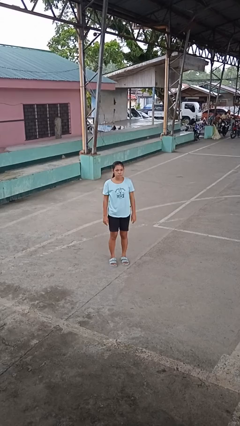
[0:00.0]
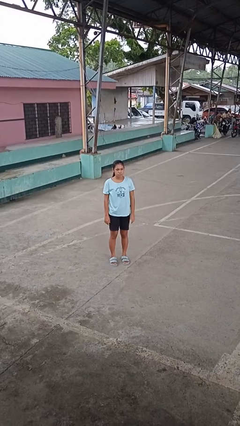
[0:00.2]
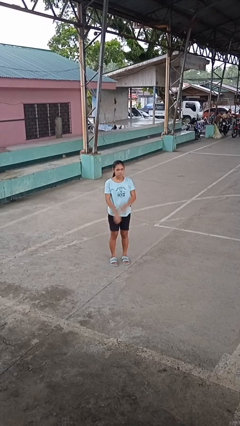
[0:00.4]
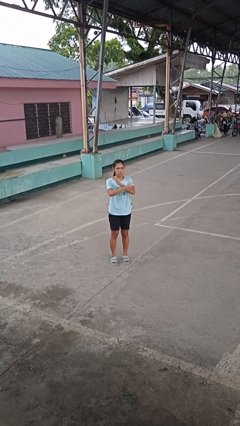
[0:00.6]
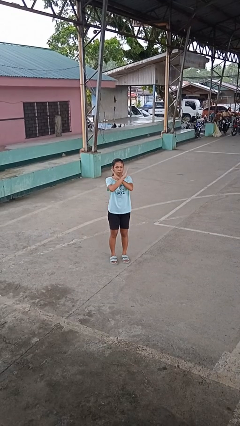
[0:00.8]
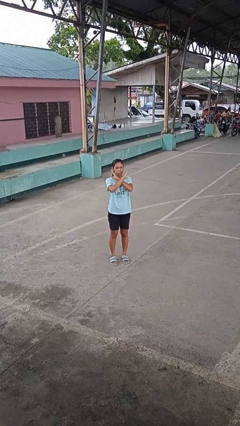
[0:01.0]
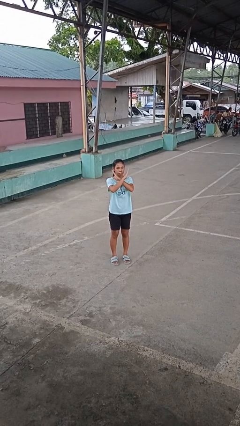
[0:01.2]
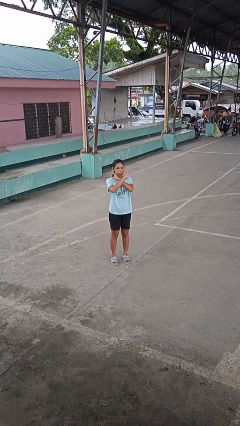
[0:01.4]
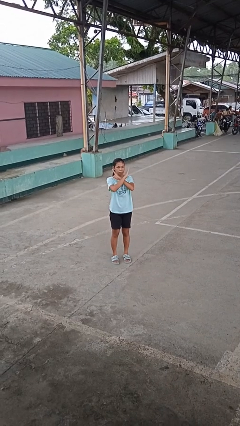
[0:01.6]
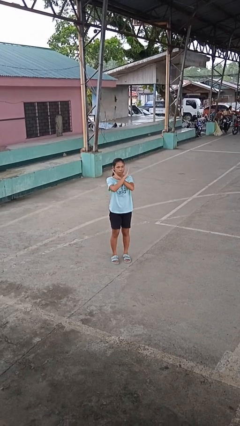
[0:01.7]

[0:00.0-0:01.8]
person gestures arms x

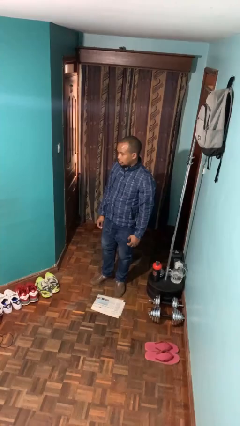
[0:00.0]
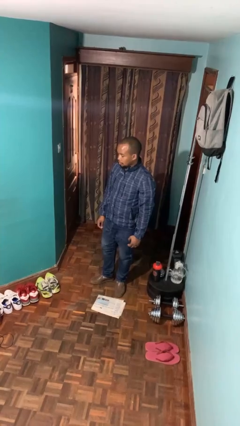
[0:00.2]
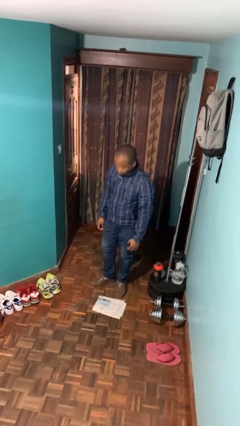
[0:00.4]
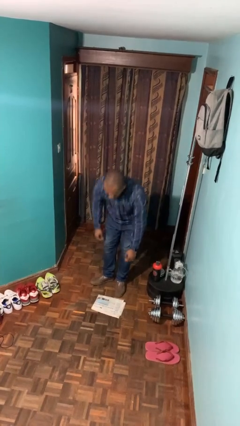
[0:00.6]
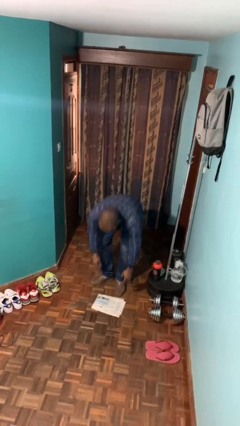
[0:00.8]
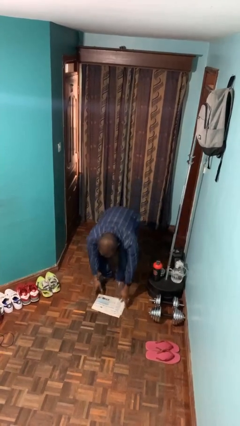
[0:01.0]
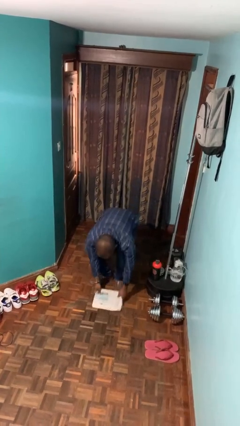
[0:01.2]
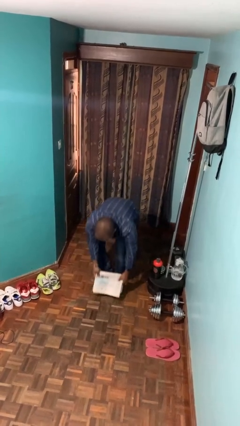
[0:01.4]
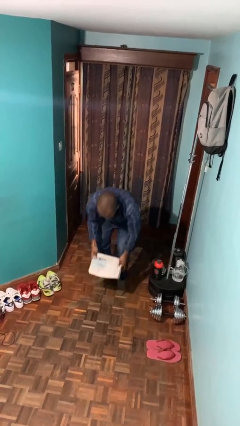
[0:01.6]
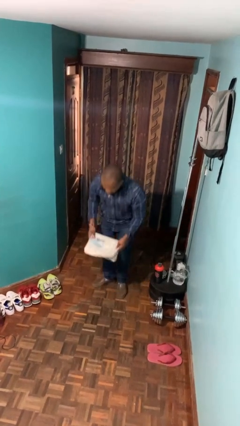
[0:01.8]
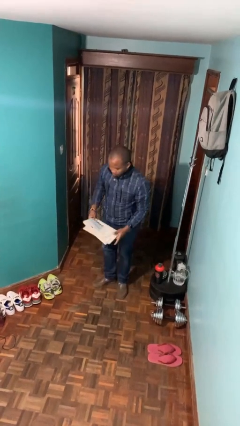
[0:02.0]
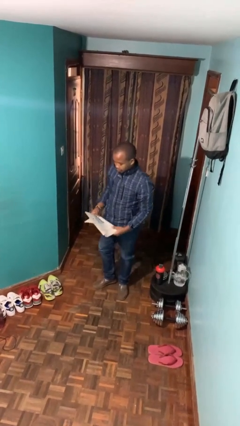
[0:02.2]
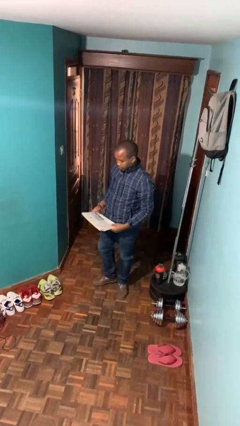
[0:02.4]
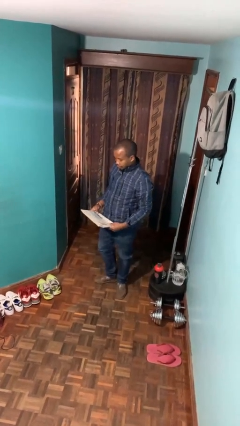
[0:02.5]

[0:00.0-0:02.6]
person picks up object from floor

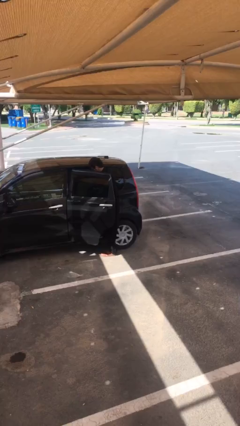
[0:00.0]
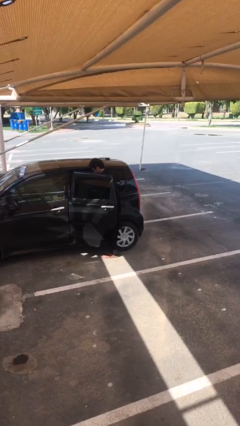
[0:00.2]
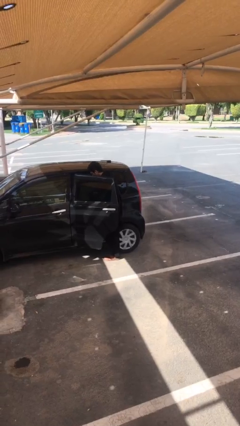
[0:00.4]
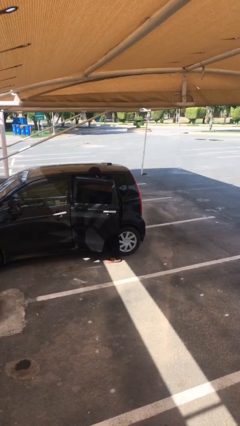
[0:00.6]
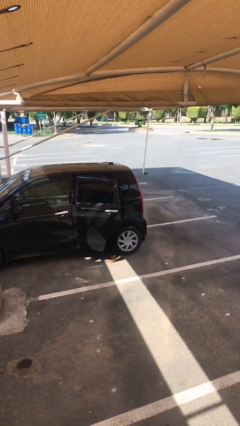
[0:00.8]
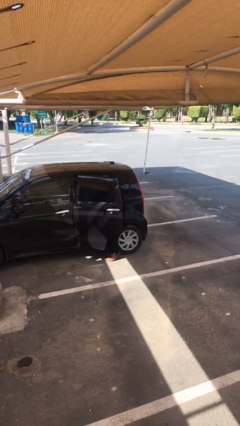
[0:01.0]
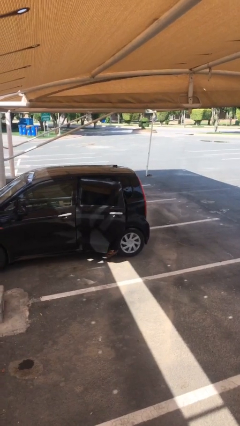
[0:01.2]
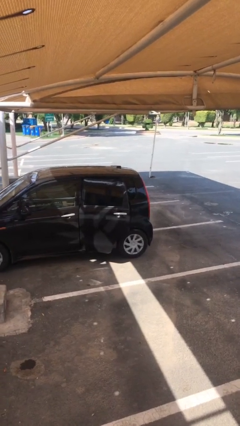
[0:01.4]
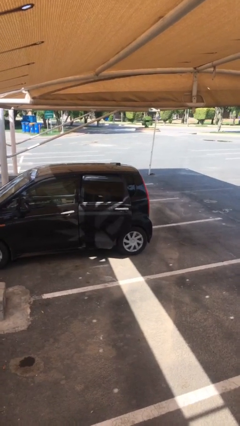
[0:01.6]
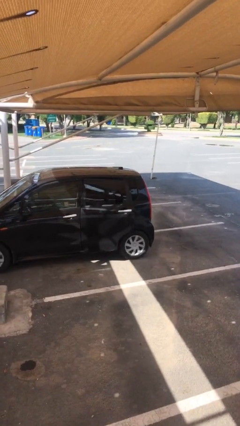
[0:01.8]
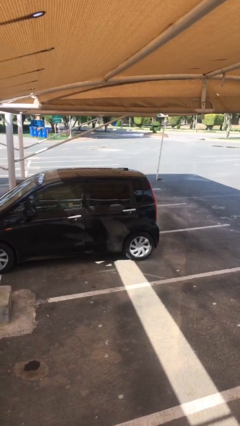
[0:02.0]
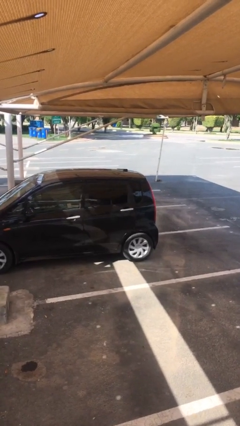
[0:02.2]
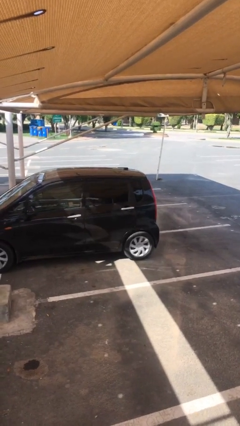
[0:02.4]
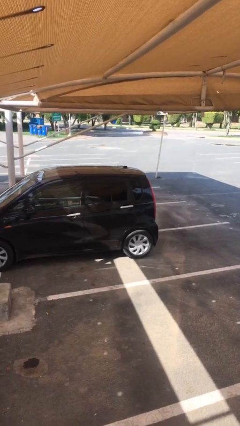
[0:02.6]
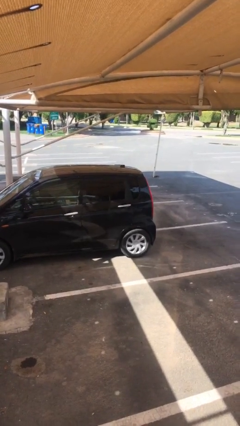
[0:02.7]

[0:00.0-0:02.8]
person closes car door

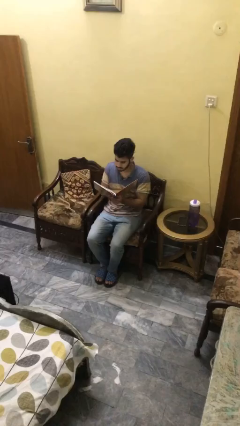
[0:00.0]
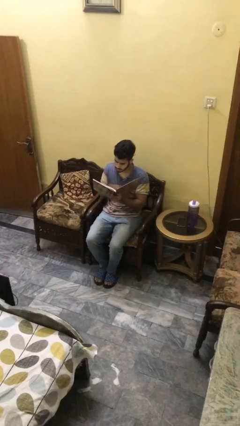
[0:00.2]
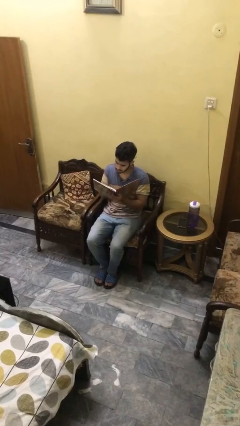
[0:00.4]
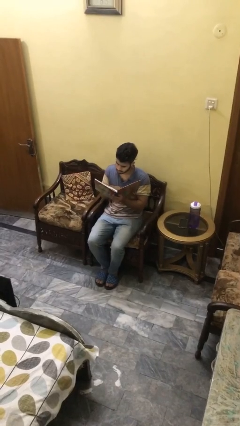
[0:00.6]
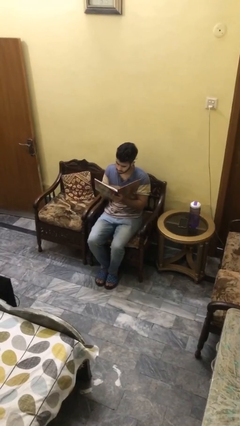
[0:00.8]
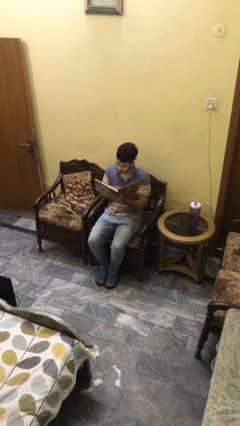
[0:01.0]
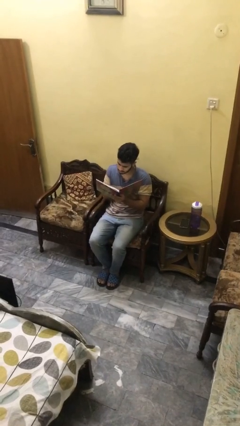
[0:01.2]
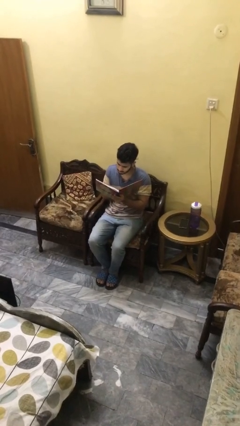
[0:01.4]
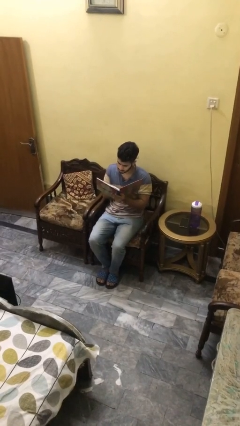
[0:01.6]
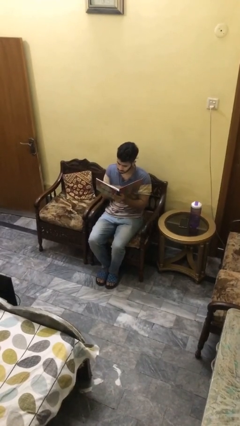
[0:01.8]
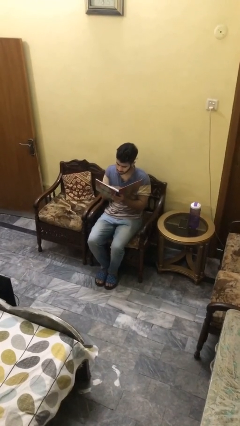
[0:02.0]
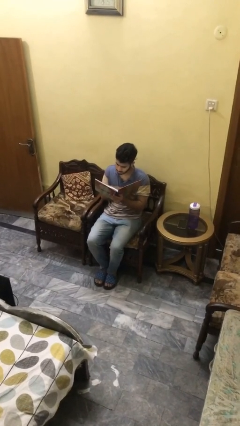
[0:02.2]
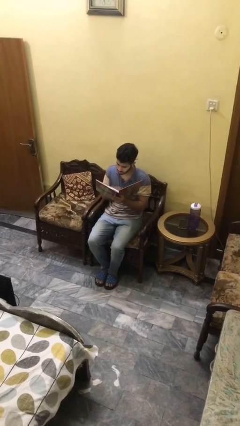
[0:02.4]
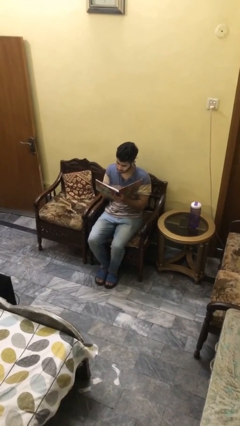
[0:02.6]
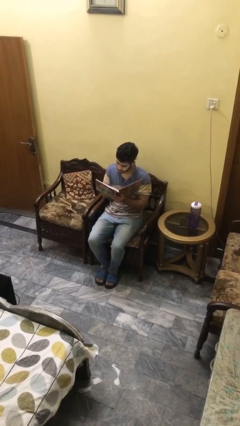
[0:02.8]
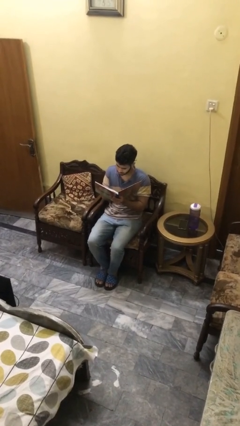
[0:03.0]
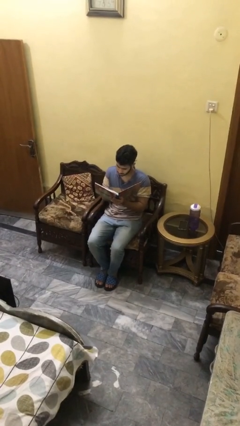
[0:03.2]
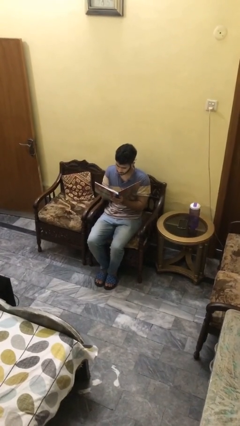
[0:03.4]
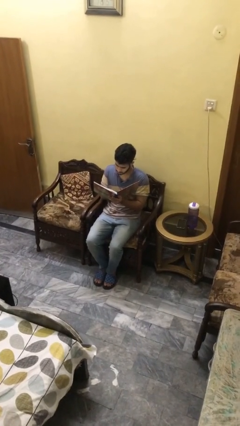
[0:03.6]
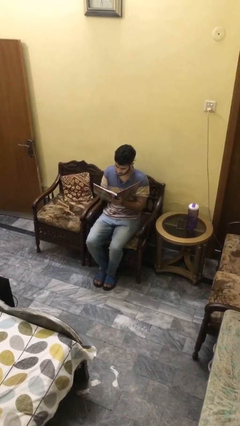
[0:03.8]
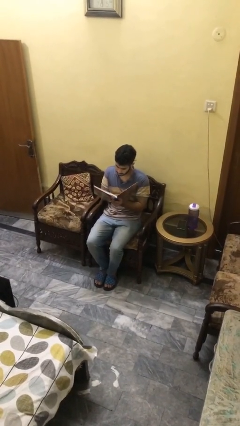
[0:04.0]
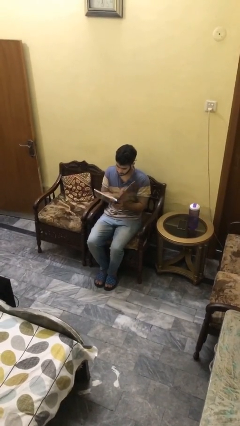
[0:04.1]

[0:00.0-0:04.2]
person reads document

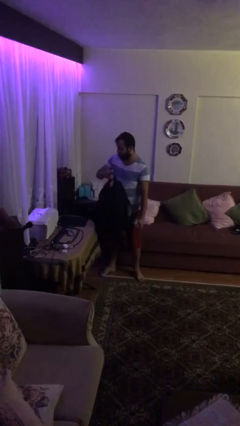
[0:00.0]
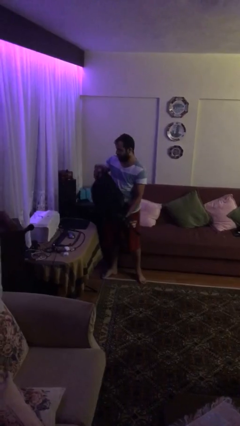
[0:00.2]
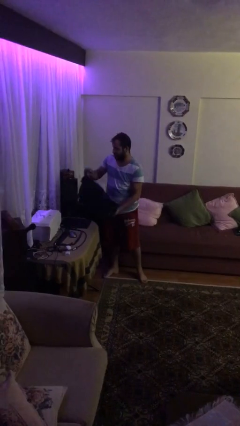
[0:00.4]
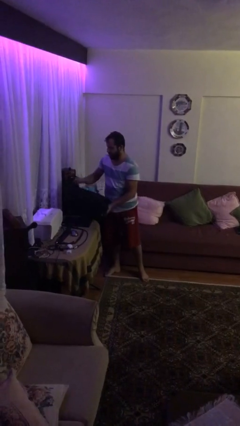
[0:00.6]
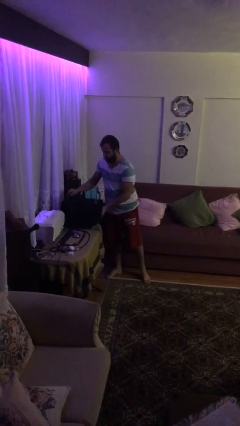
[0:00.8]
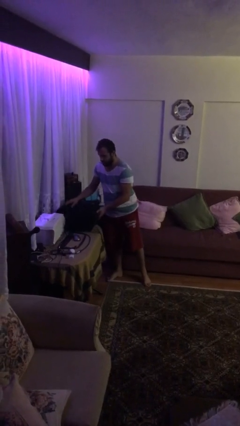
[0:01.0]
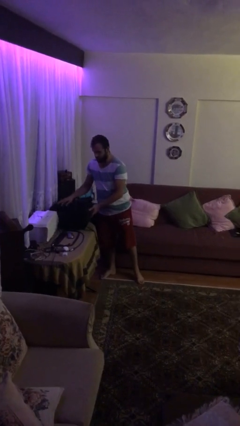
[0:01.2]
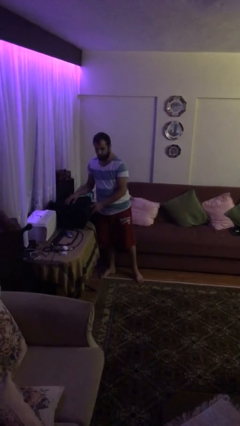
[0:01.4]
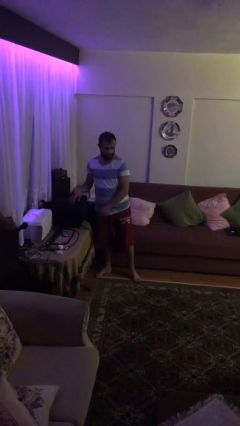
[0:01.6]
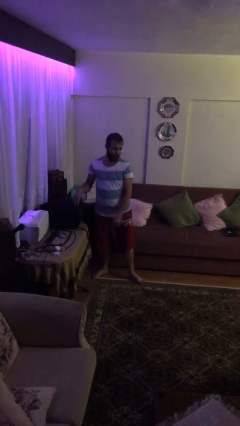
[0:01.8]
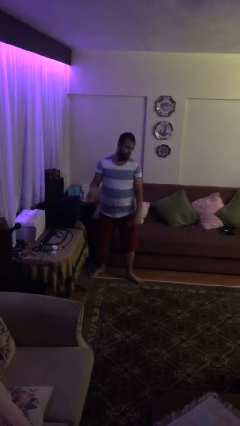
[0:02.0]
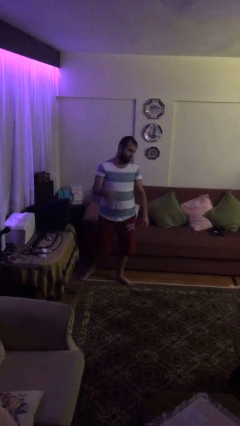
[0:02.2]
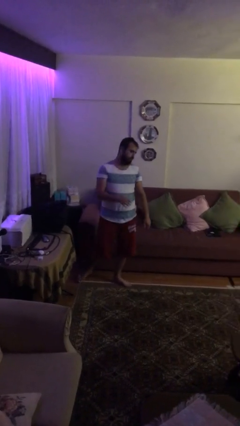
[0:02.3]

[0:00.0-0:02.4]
person puts down object on table

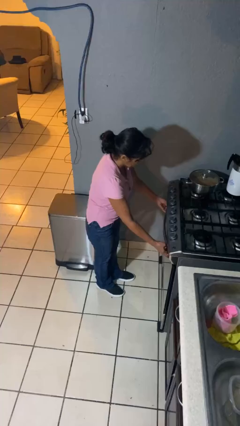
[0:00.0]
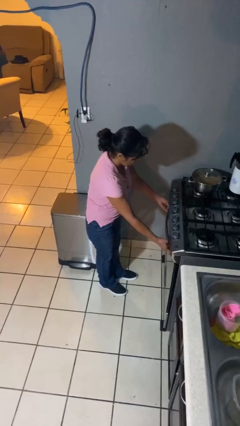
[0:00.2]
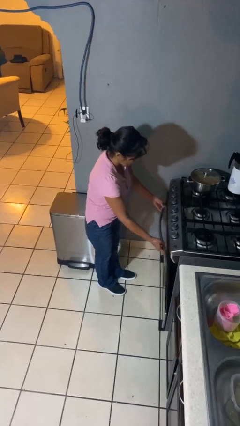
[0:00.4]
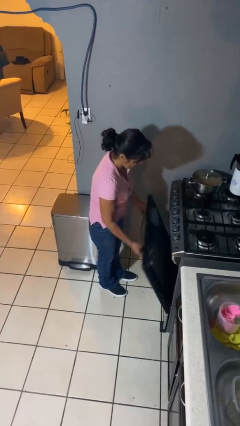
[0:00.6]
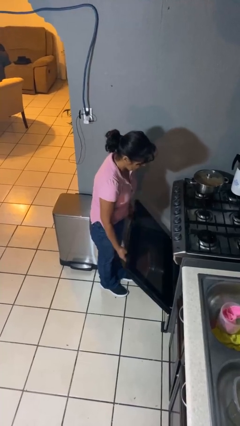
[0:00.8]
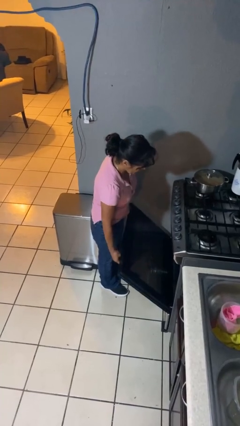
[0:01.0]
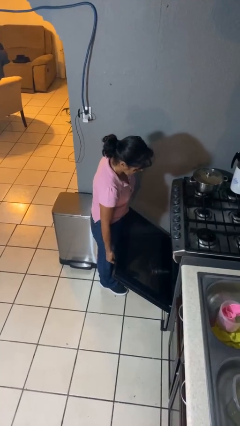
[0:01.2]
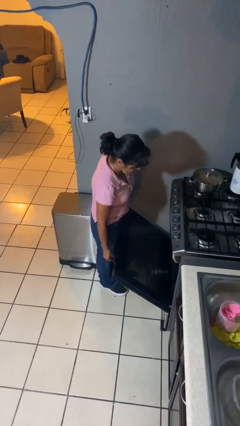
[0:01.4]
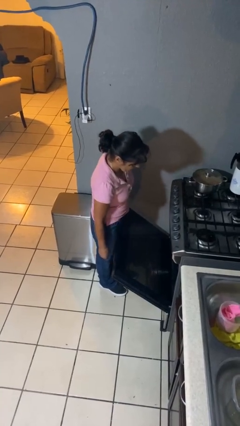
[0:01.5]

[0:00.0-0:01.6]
person opens oven door

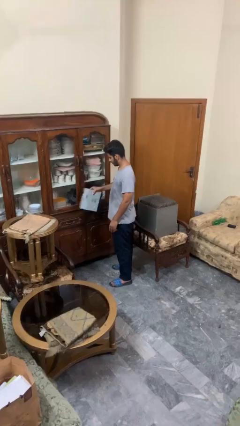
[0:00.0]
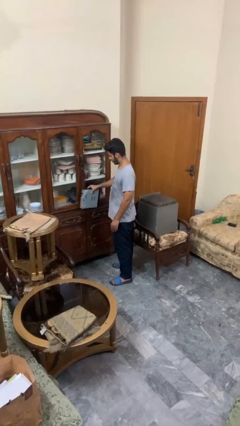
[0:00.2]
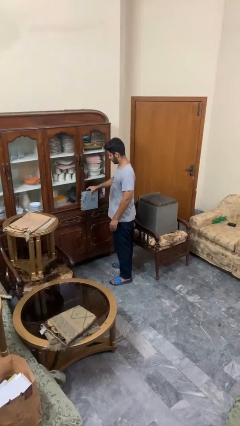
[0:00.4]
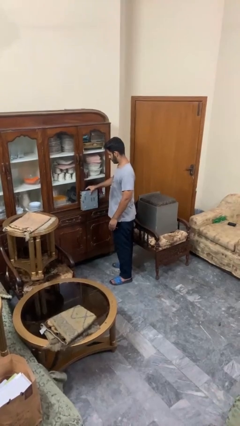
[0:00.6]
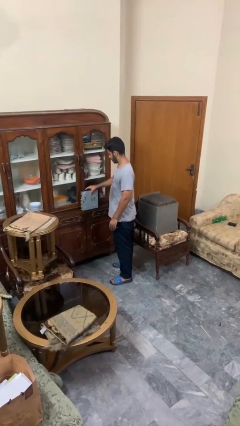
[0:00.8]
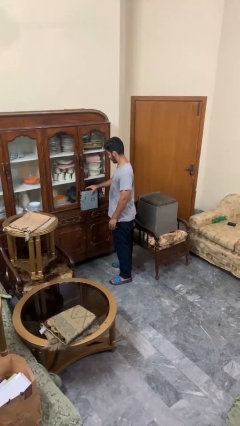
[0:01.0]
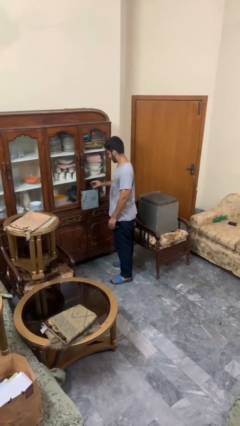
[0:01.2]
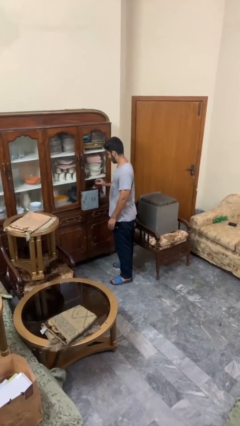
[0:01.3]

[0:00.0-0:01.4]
person puts down object on countertop
